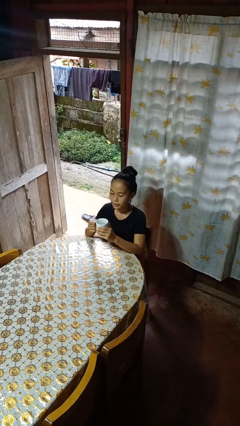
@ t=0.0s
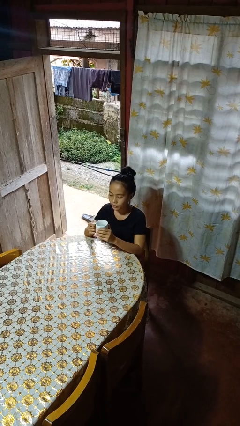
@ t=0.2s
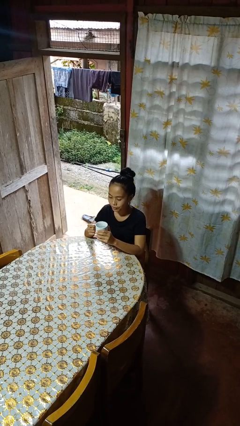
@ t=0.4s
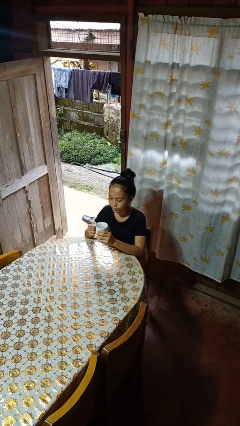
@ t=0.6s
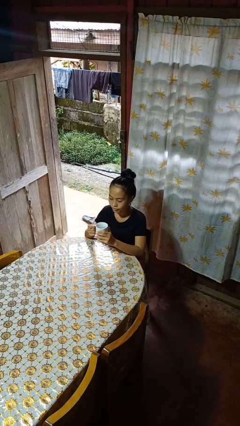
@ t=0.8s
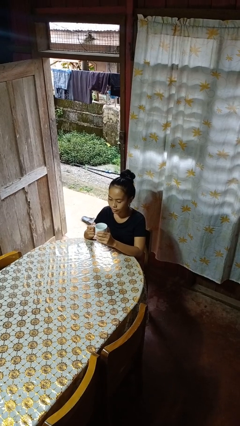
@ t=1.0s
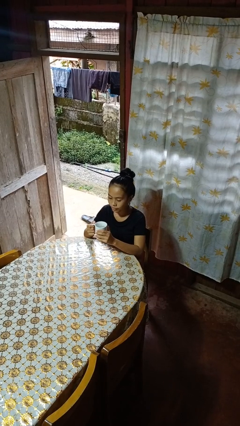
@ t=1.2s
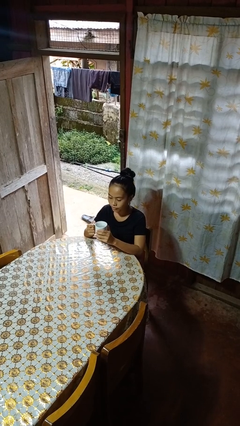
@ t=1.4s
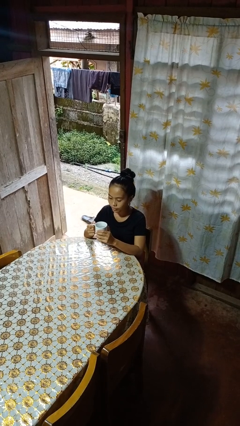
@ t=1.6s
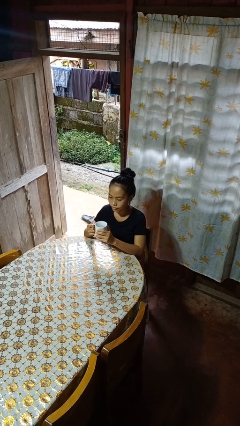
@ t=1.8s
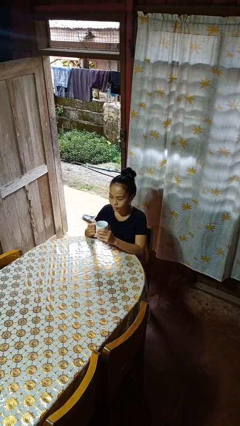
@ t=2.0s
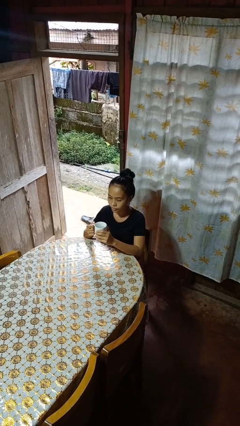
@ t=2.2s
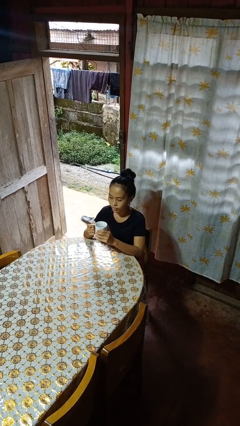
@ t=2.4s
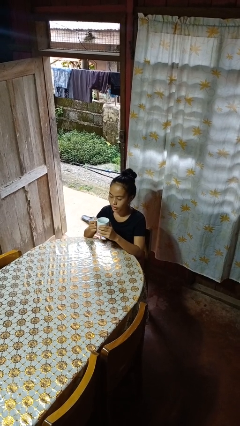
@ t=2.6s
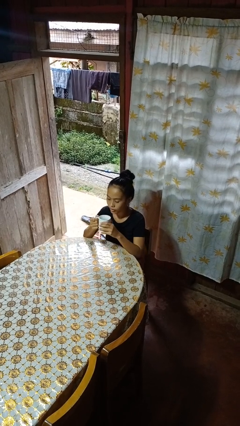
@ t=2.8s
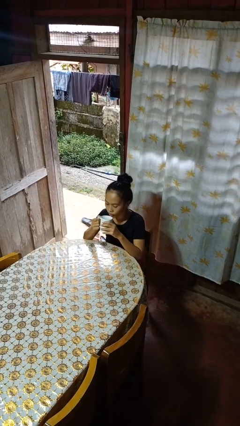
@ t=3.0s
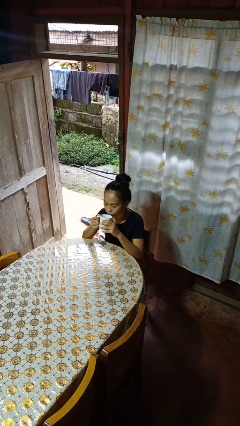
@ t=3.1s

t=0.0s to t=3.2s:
person picks up object from table

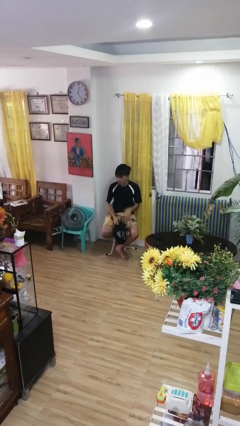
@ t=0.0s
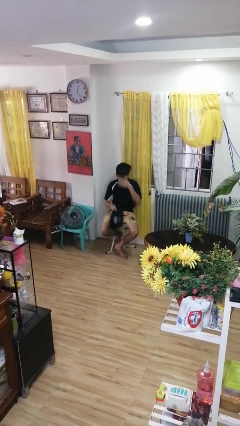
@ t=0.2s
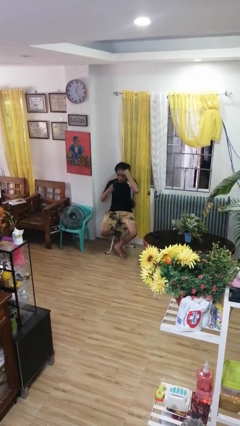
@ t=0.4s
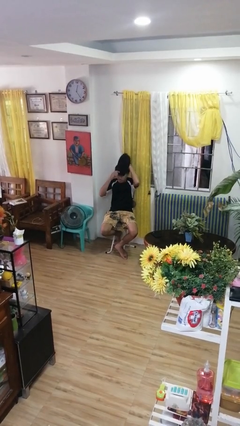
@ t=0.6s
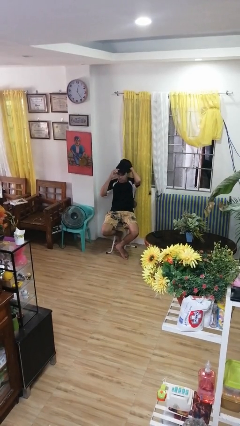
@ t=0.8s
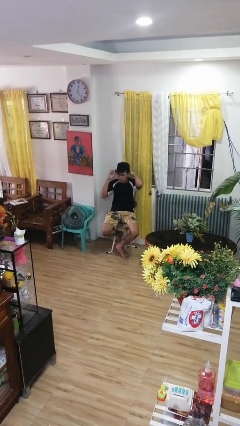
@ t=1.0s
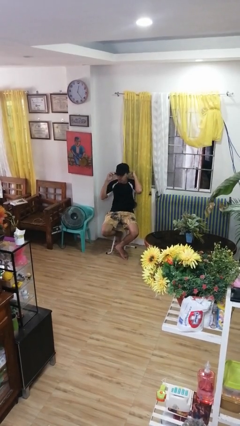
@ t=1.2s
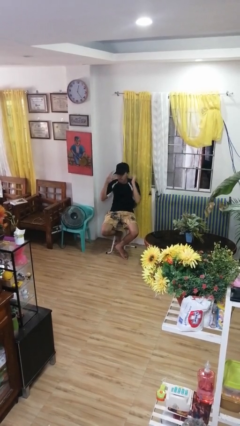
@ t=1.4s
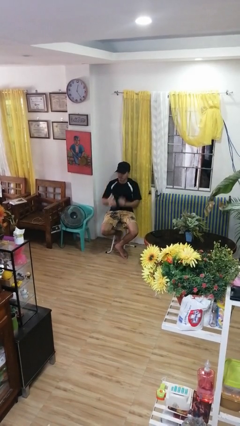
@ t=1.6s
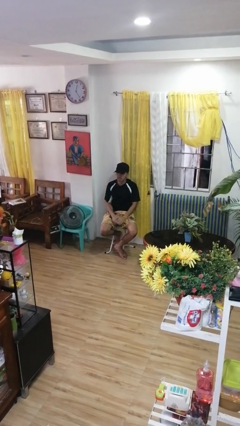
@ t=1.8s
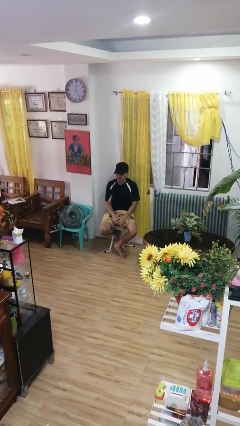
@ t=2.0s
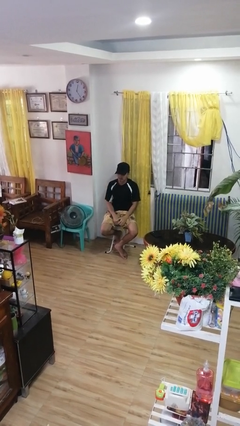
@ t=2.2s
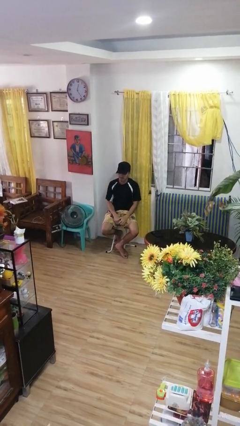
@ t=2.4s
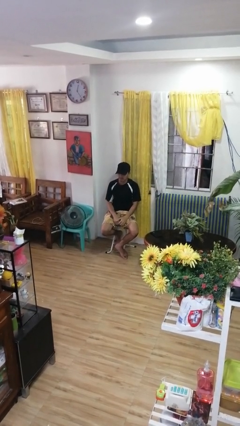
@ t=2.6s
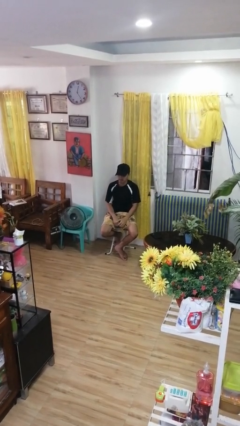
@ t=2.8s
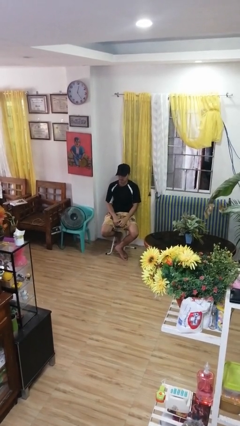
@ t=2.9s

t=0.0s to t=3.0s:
person puts on hat

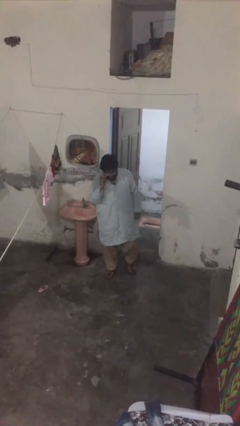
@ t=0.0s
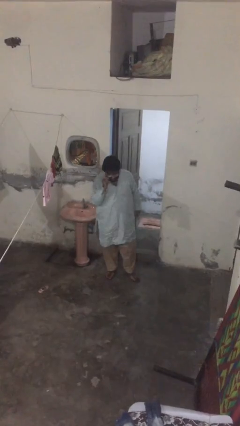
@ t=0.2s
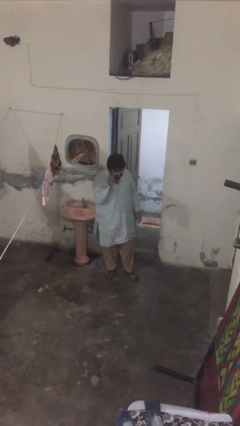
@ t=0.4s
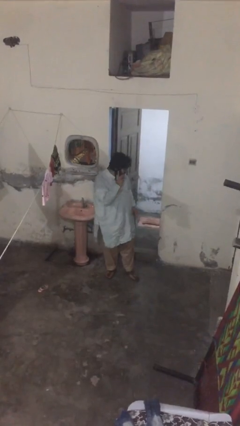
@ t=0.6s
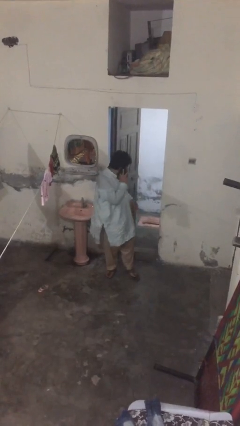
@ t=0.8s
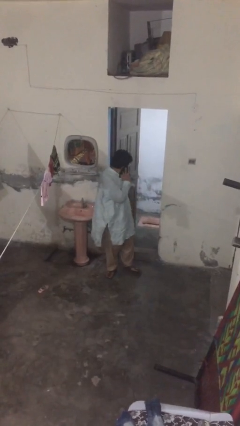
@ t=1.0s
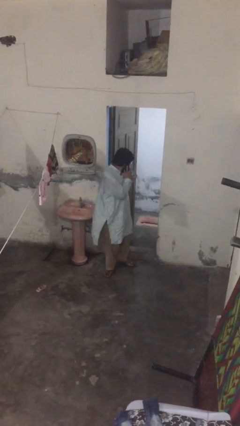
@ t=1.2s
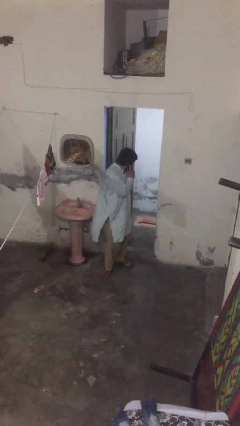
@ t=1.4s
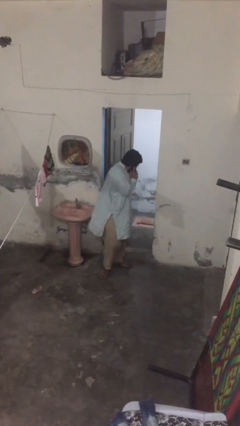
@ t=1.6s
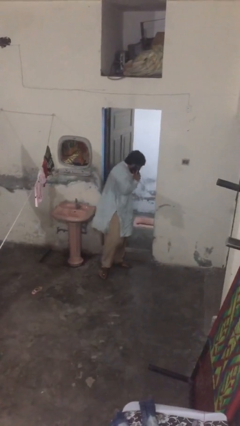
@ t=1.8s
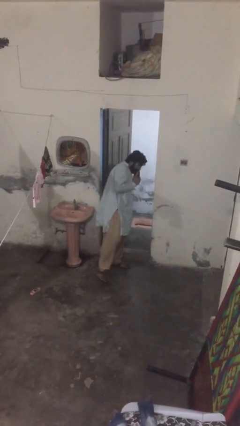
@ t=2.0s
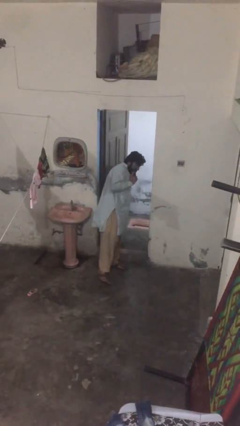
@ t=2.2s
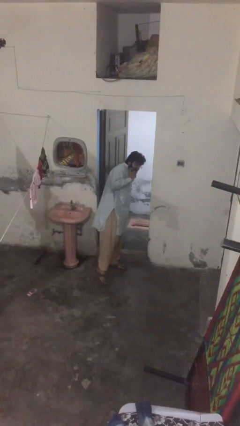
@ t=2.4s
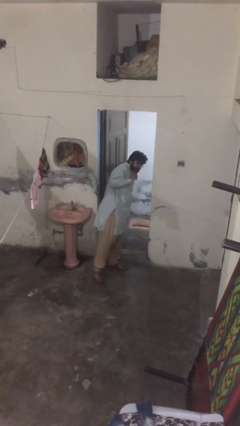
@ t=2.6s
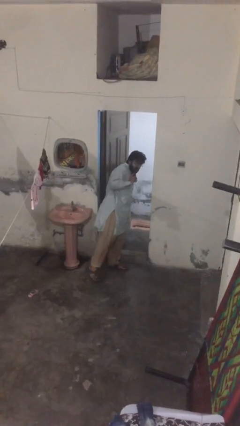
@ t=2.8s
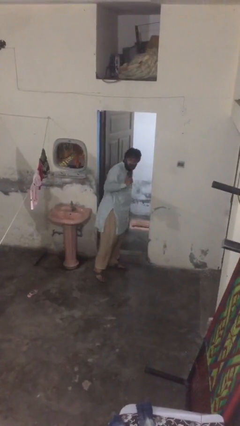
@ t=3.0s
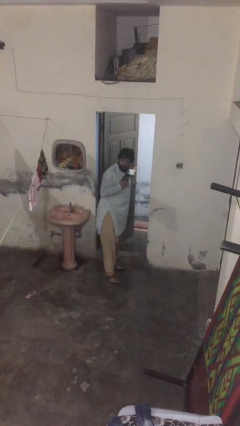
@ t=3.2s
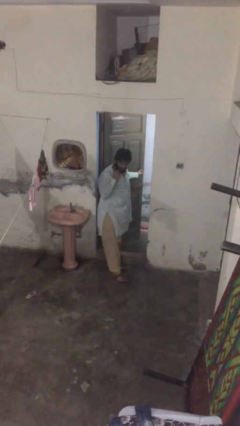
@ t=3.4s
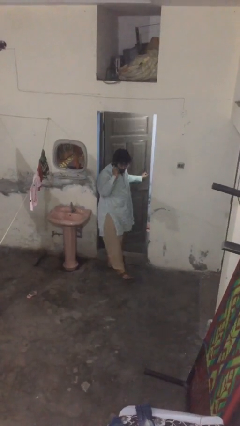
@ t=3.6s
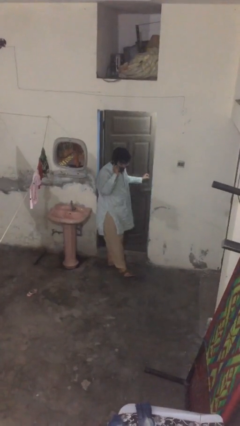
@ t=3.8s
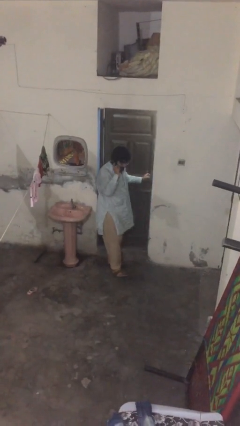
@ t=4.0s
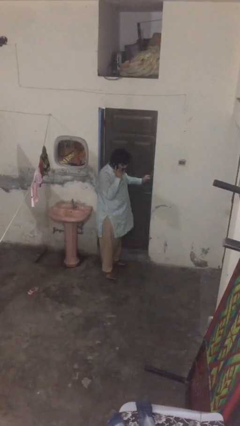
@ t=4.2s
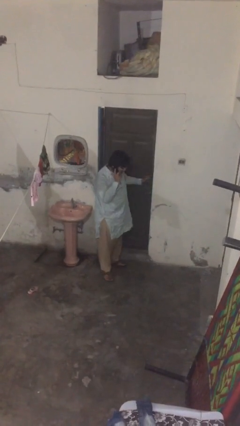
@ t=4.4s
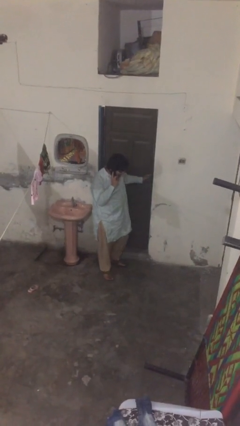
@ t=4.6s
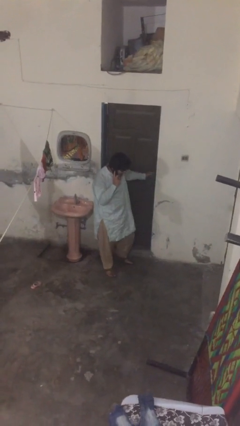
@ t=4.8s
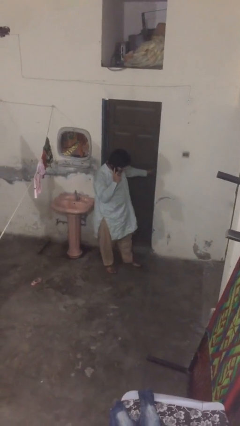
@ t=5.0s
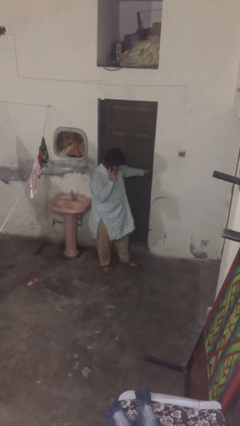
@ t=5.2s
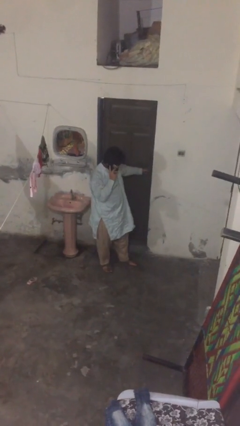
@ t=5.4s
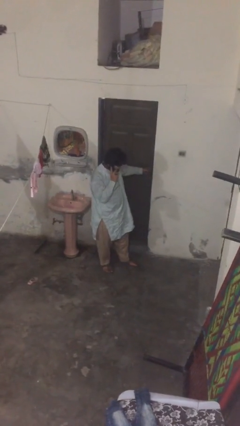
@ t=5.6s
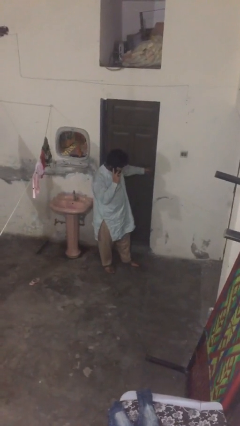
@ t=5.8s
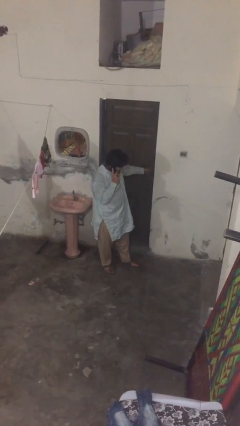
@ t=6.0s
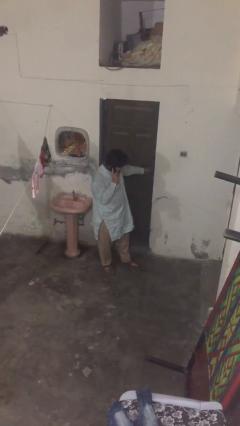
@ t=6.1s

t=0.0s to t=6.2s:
person closes facility door

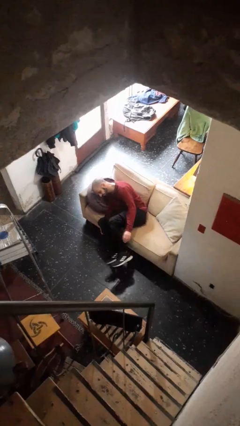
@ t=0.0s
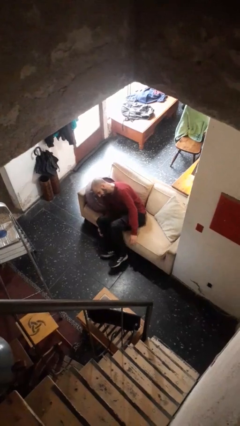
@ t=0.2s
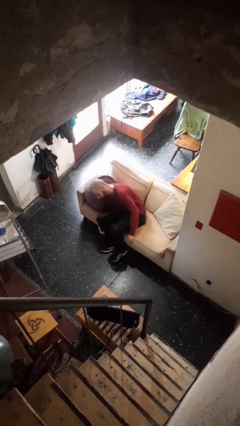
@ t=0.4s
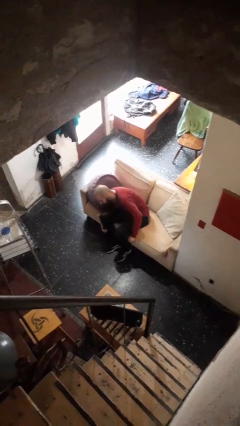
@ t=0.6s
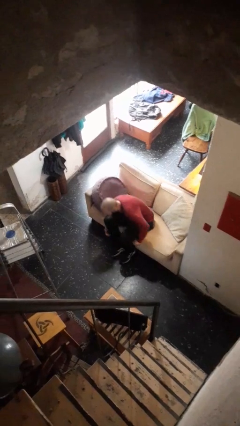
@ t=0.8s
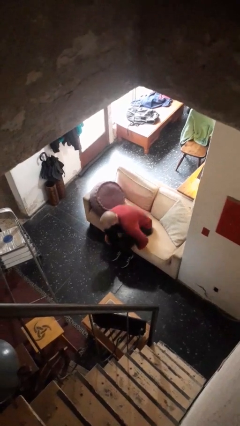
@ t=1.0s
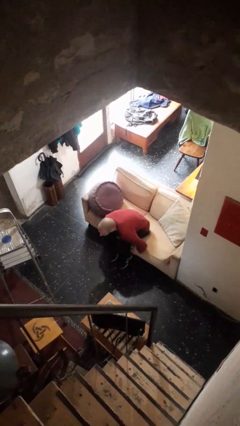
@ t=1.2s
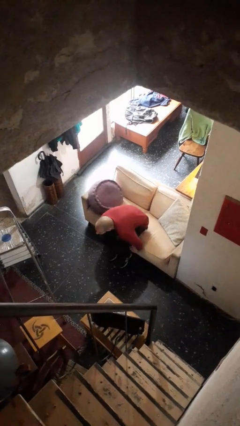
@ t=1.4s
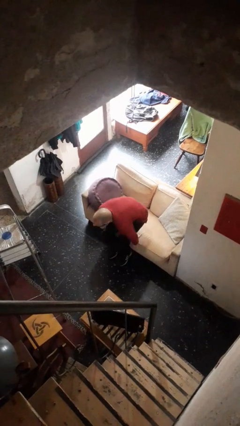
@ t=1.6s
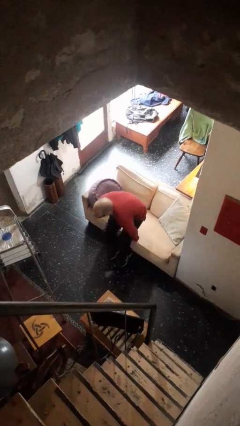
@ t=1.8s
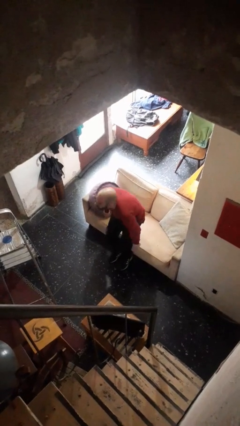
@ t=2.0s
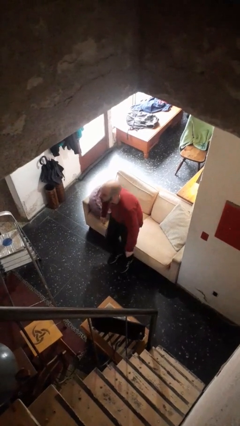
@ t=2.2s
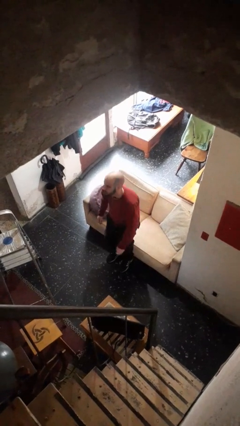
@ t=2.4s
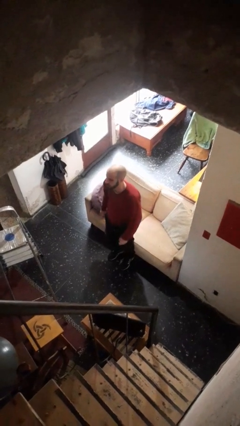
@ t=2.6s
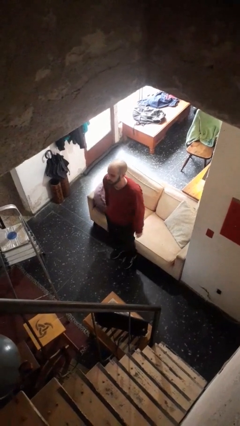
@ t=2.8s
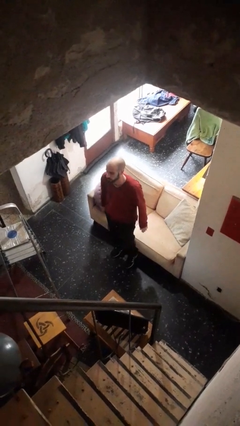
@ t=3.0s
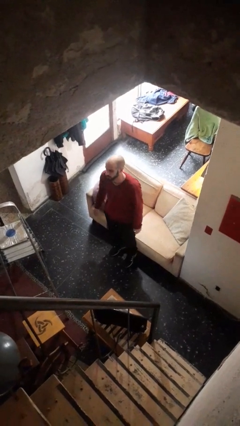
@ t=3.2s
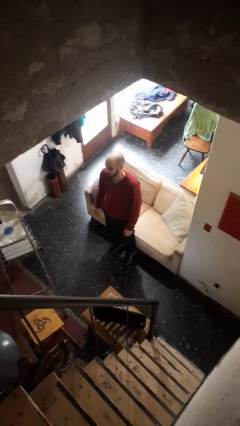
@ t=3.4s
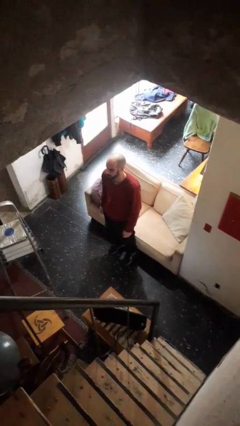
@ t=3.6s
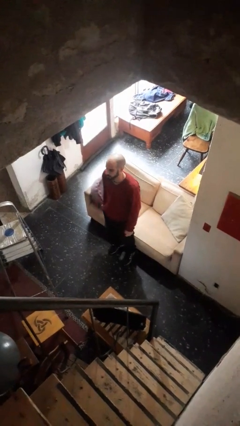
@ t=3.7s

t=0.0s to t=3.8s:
person stands up

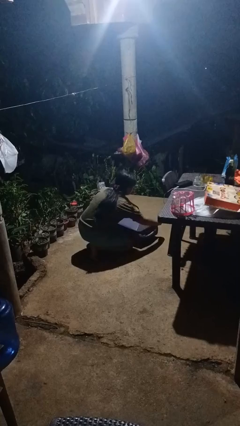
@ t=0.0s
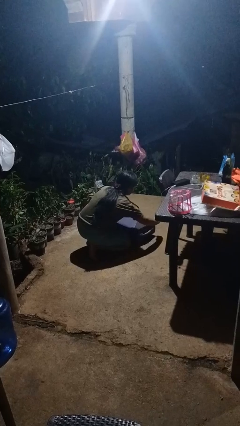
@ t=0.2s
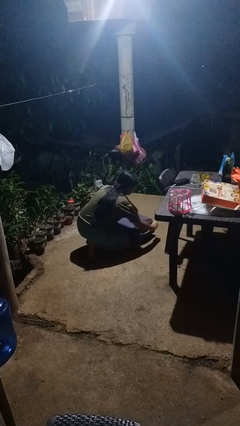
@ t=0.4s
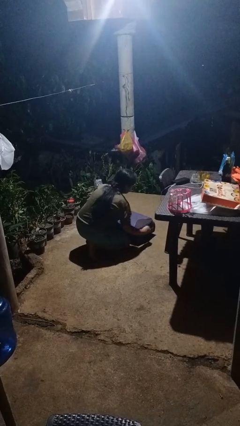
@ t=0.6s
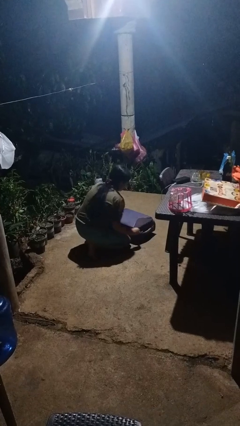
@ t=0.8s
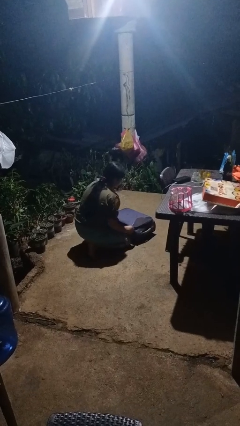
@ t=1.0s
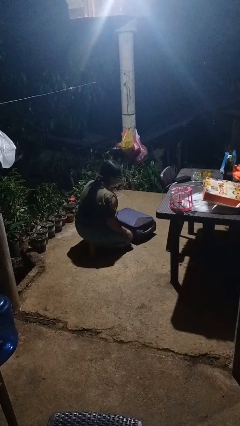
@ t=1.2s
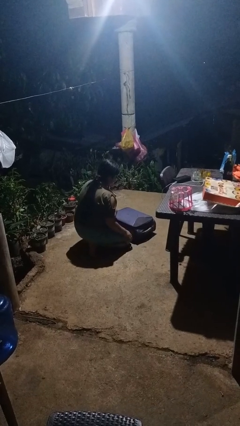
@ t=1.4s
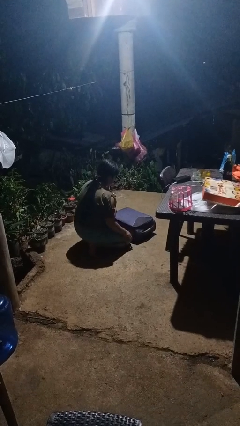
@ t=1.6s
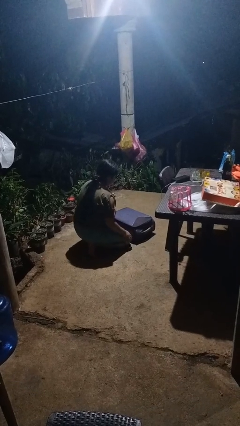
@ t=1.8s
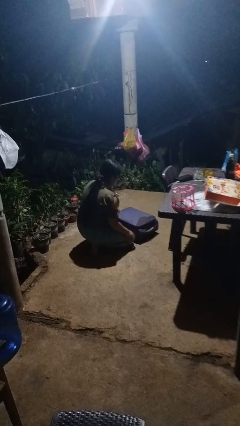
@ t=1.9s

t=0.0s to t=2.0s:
person closes suitcase
